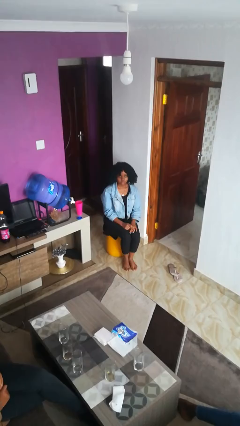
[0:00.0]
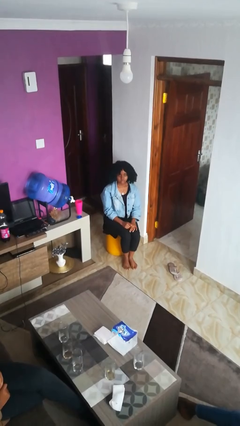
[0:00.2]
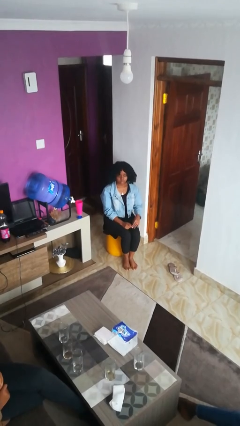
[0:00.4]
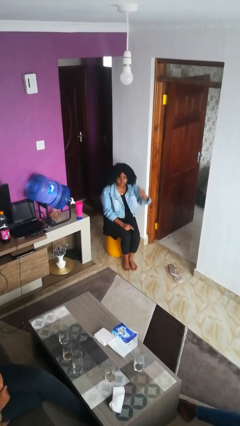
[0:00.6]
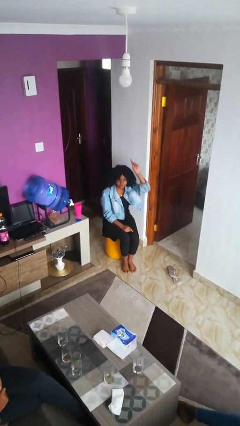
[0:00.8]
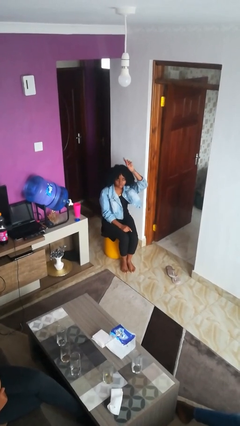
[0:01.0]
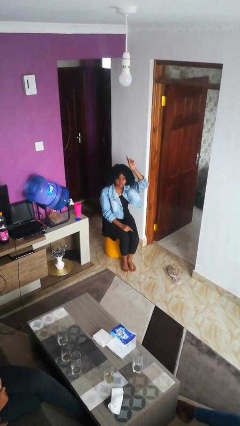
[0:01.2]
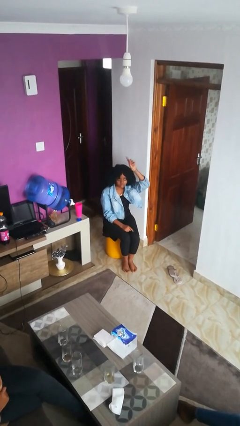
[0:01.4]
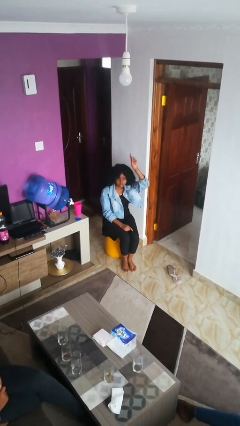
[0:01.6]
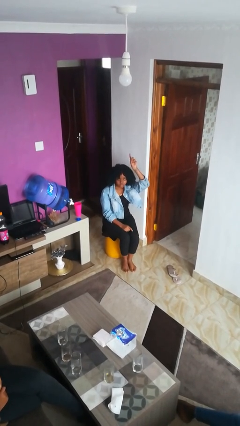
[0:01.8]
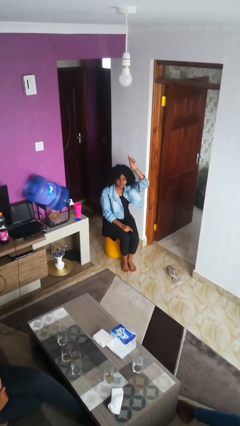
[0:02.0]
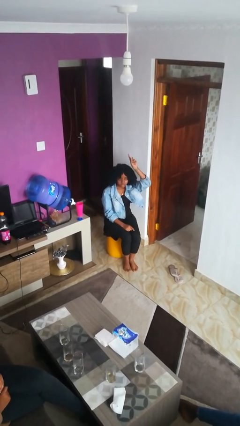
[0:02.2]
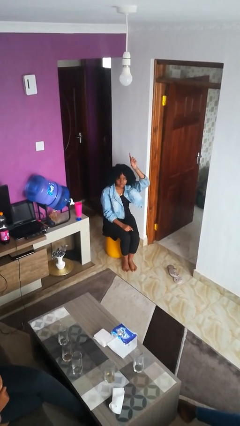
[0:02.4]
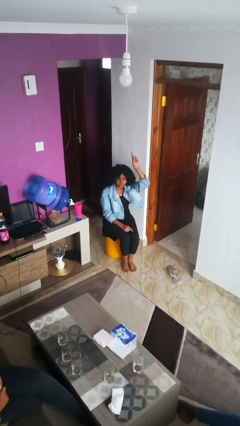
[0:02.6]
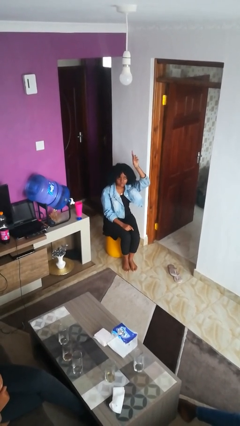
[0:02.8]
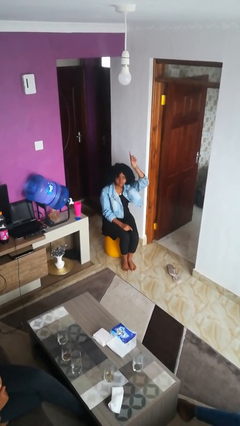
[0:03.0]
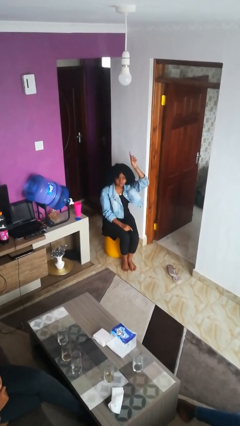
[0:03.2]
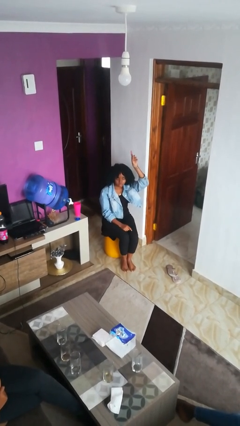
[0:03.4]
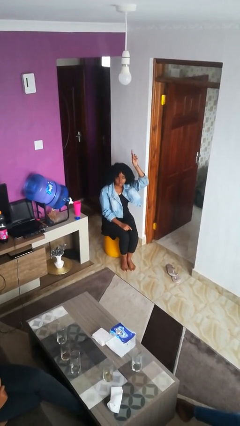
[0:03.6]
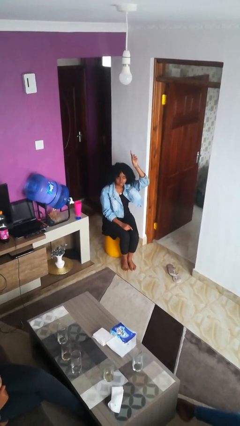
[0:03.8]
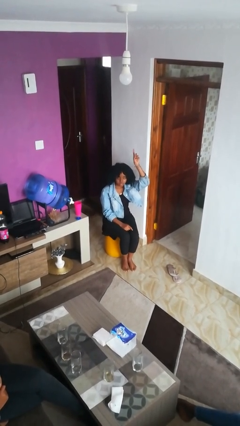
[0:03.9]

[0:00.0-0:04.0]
person gestures raise hand

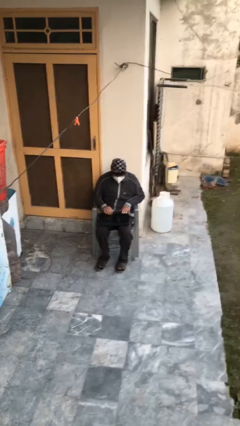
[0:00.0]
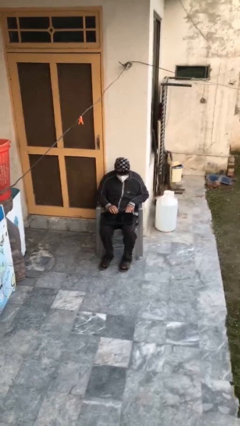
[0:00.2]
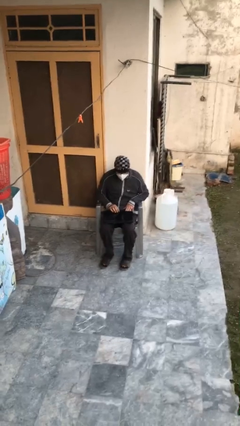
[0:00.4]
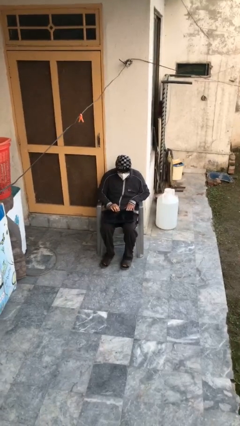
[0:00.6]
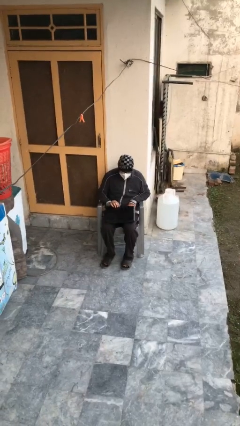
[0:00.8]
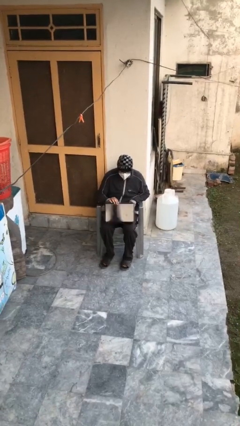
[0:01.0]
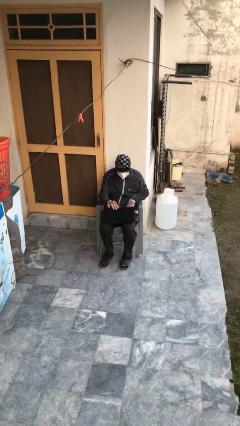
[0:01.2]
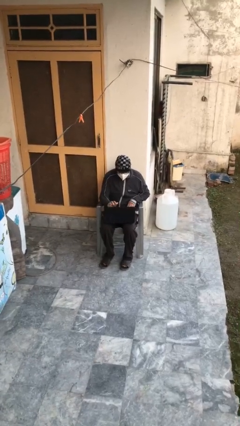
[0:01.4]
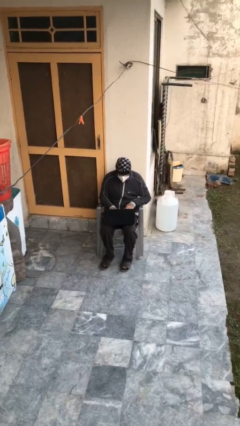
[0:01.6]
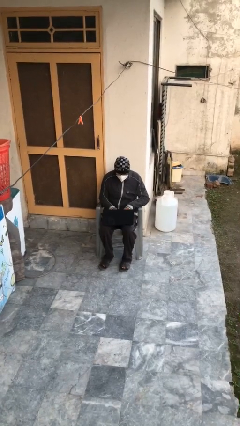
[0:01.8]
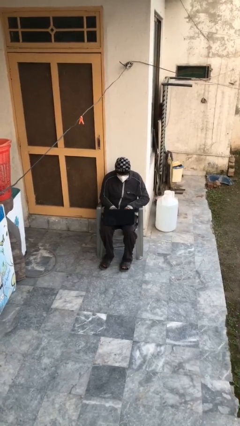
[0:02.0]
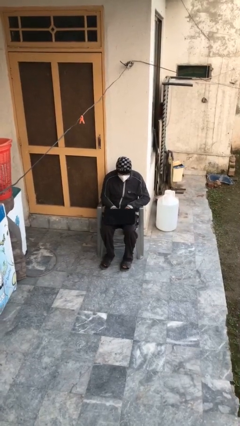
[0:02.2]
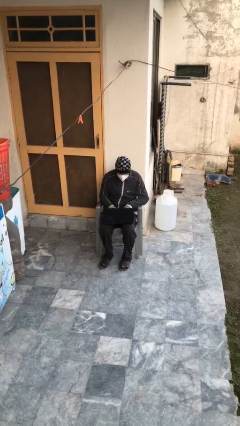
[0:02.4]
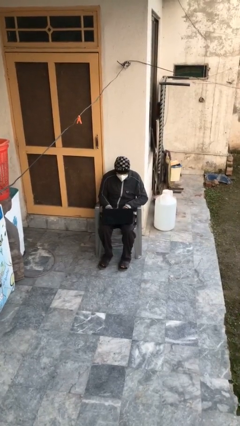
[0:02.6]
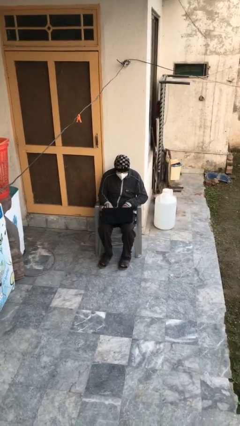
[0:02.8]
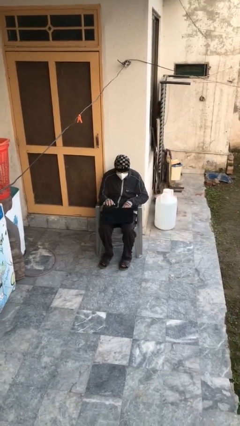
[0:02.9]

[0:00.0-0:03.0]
person interacts with laptop

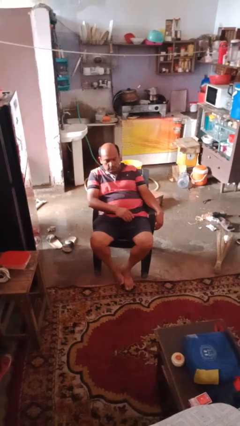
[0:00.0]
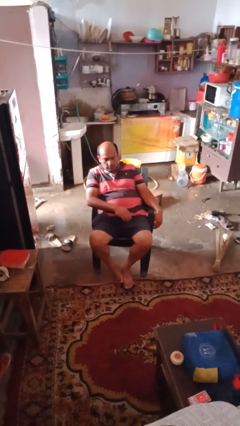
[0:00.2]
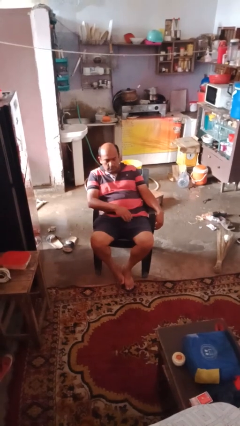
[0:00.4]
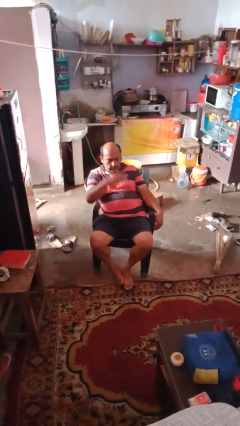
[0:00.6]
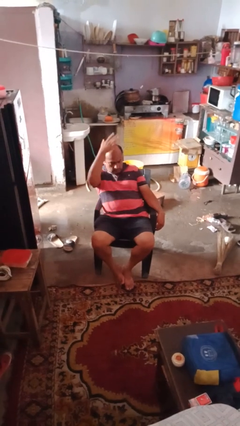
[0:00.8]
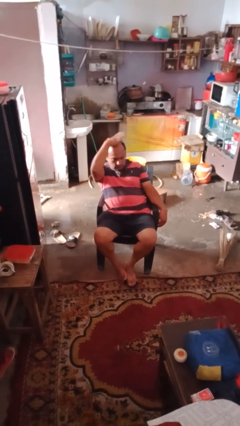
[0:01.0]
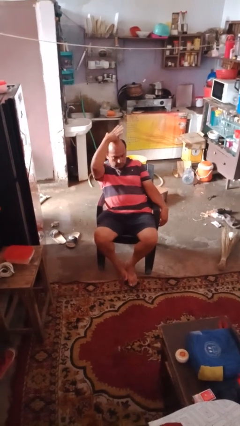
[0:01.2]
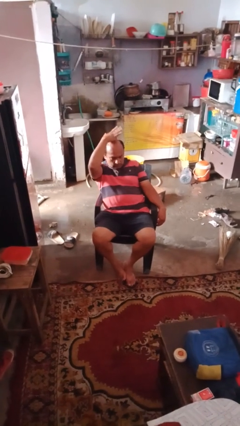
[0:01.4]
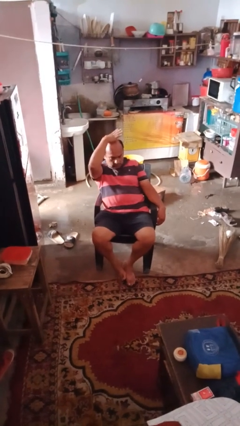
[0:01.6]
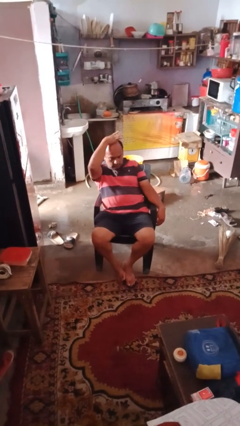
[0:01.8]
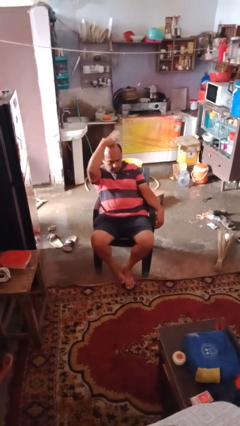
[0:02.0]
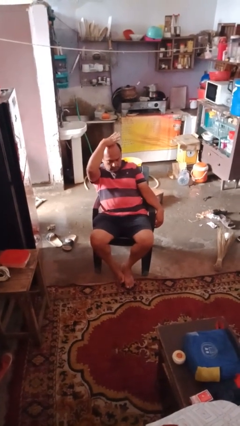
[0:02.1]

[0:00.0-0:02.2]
person pats head

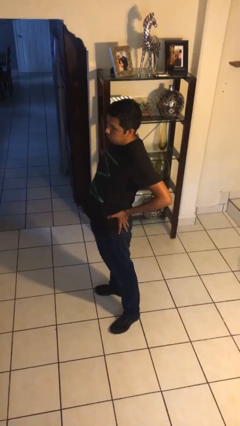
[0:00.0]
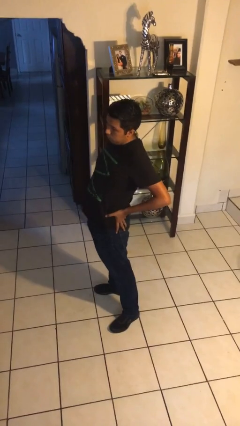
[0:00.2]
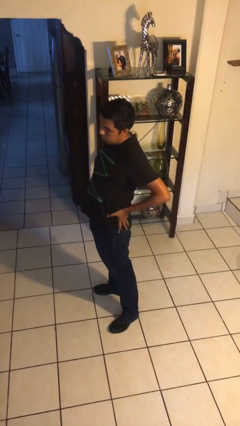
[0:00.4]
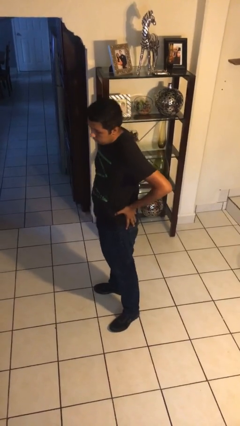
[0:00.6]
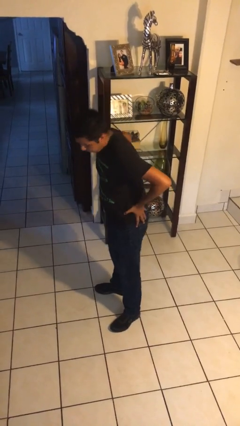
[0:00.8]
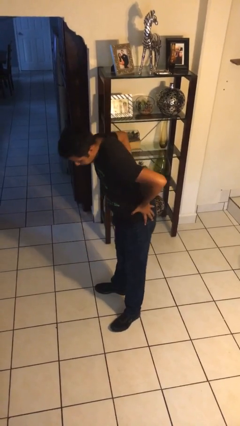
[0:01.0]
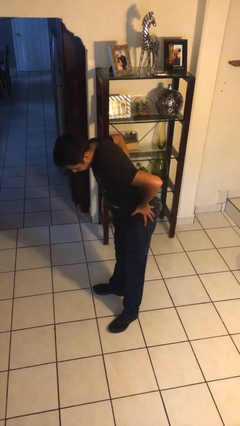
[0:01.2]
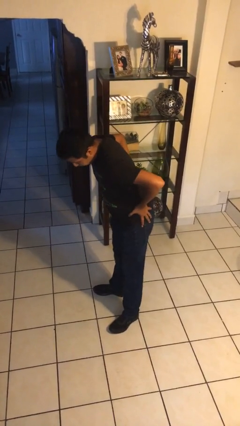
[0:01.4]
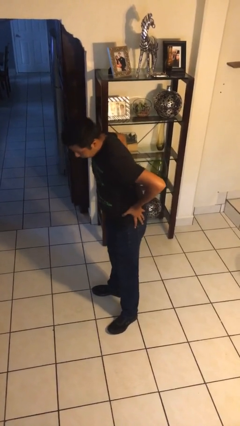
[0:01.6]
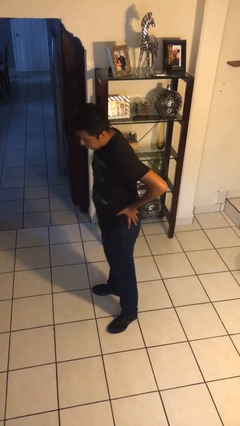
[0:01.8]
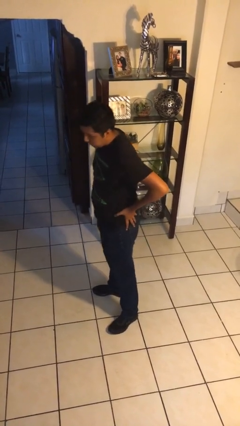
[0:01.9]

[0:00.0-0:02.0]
person wiggles hips

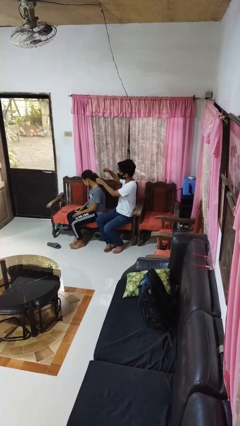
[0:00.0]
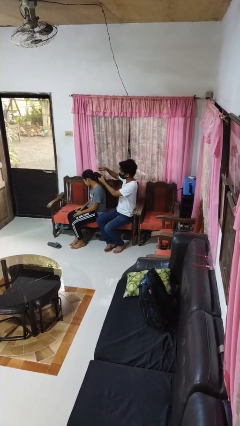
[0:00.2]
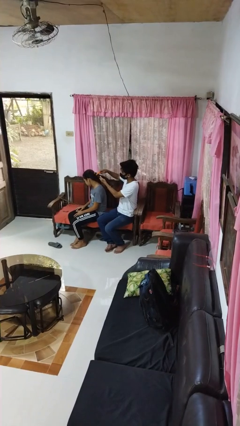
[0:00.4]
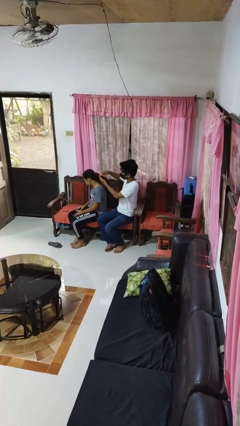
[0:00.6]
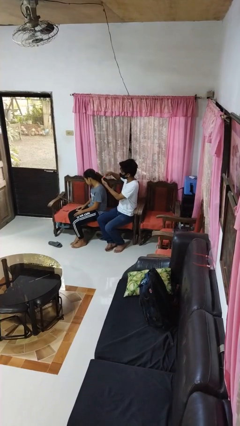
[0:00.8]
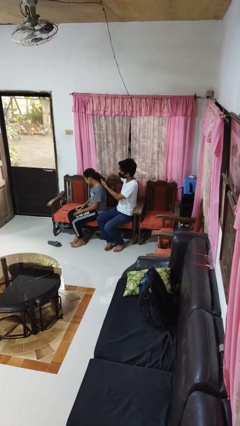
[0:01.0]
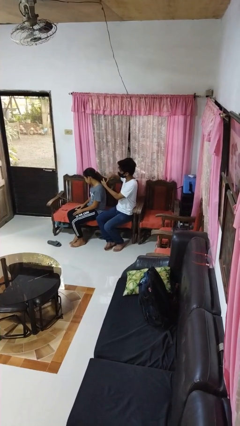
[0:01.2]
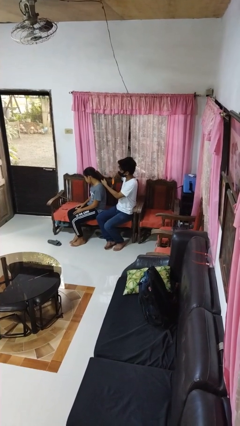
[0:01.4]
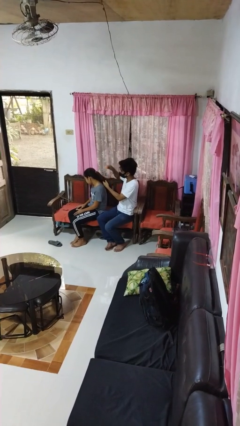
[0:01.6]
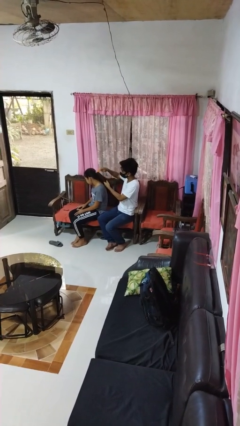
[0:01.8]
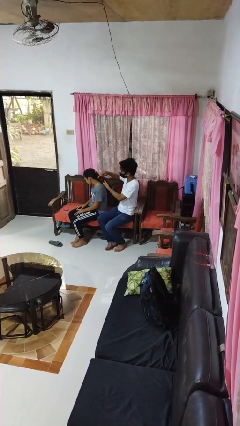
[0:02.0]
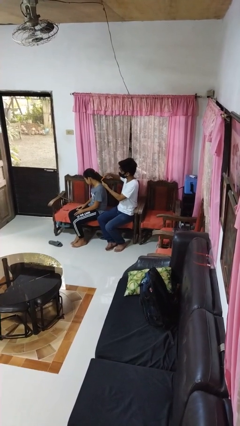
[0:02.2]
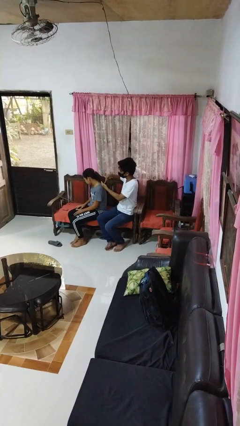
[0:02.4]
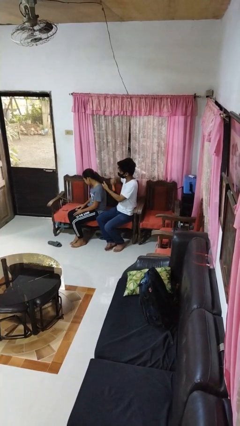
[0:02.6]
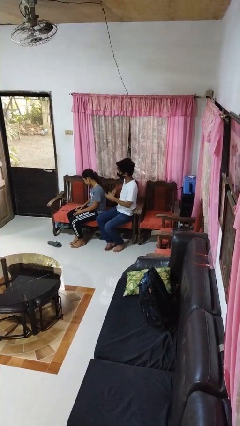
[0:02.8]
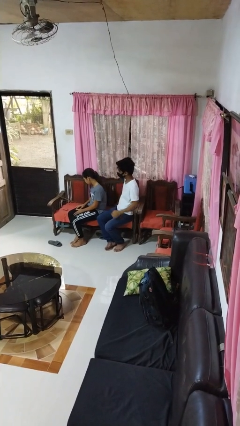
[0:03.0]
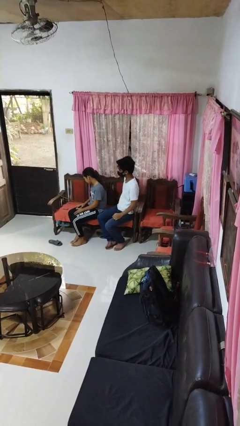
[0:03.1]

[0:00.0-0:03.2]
person brushes hair of person

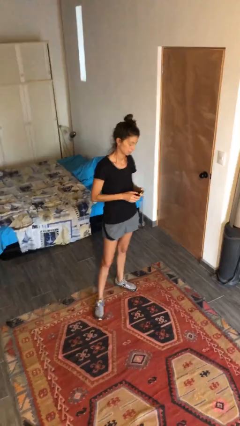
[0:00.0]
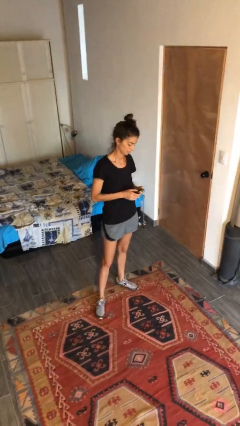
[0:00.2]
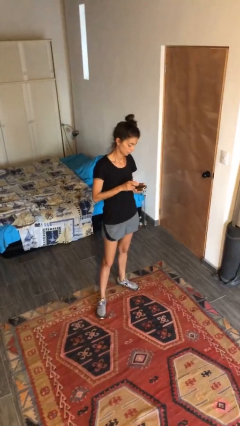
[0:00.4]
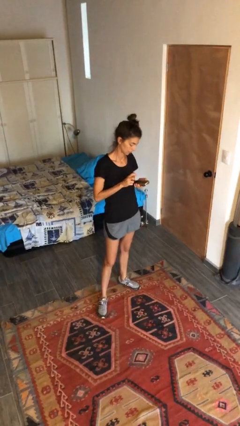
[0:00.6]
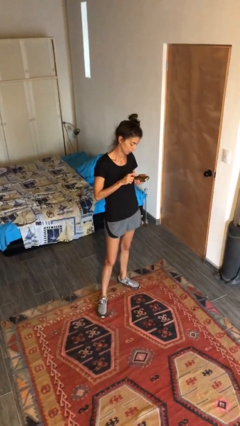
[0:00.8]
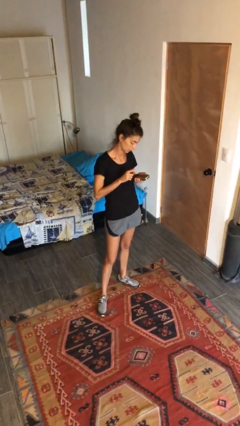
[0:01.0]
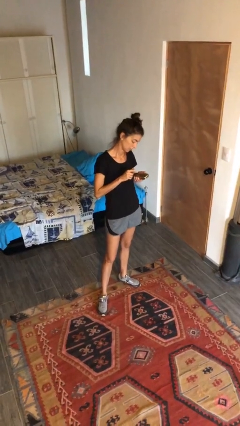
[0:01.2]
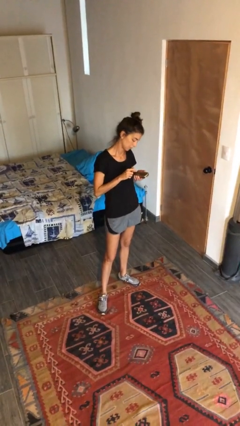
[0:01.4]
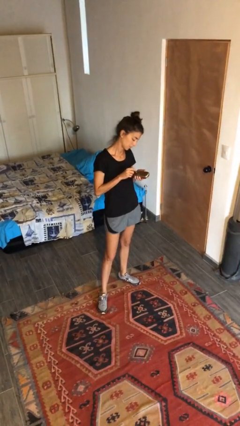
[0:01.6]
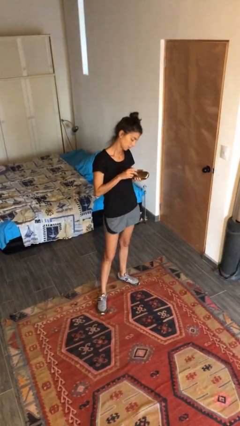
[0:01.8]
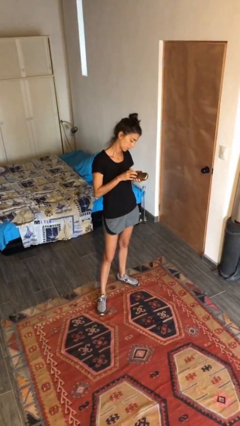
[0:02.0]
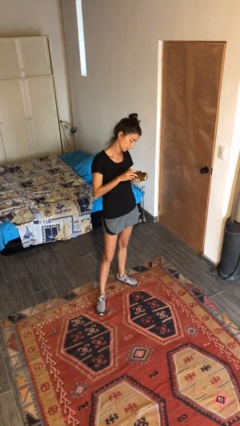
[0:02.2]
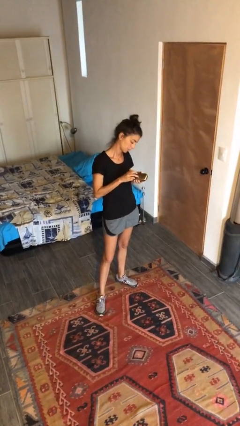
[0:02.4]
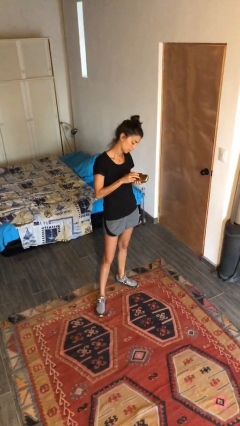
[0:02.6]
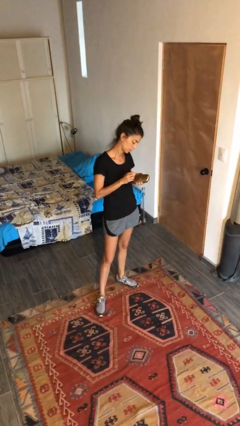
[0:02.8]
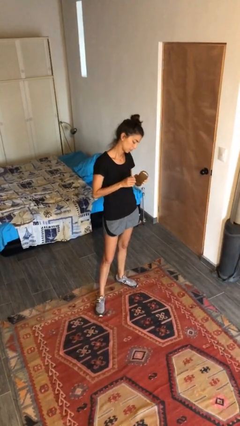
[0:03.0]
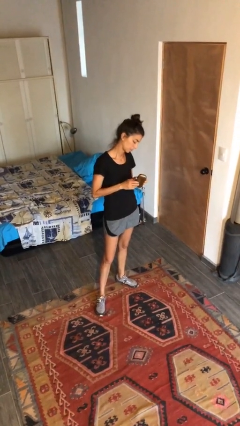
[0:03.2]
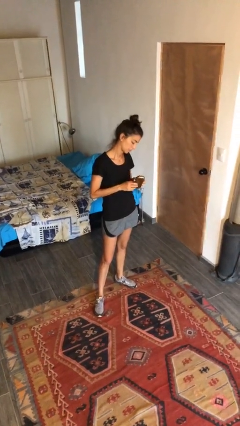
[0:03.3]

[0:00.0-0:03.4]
person taps object with finger
